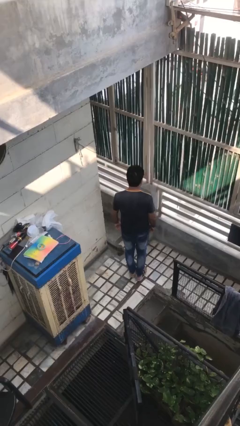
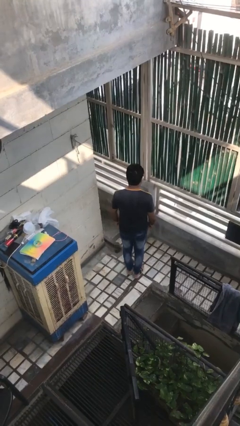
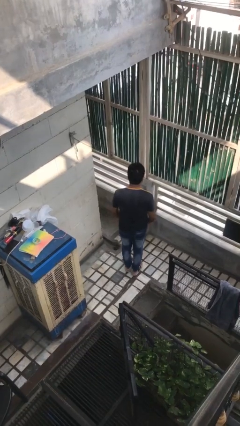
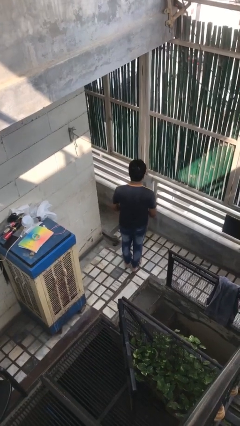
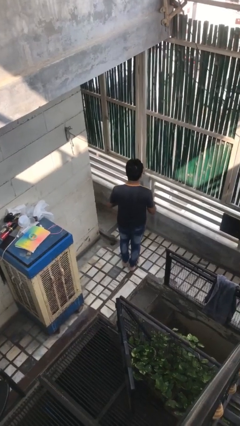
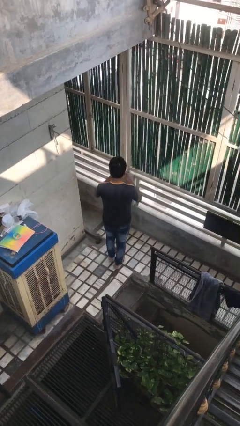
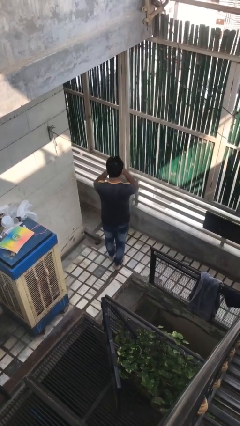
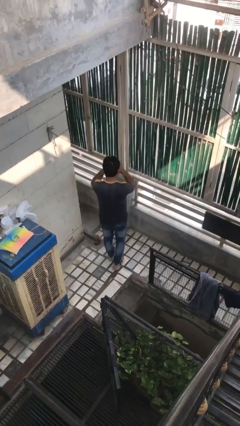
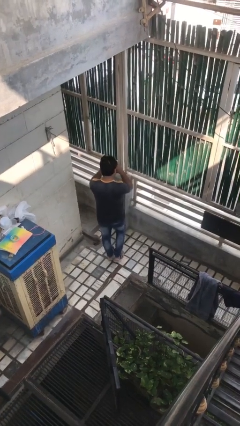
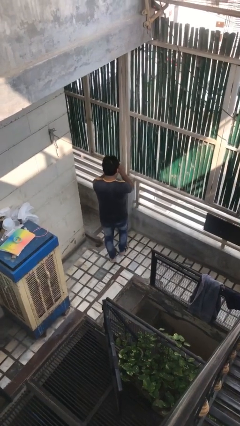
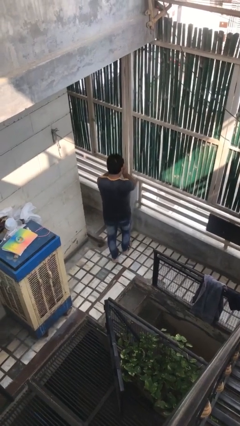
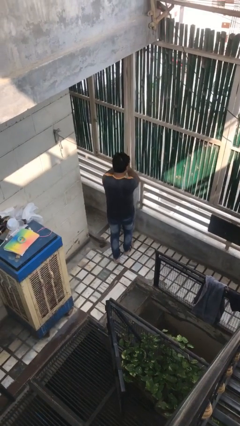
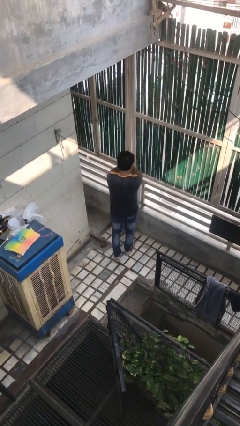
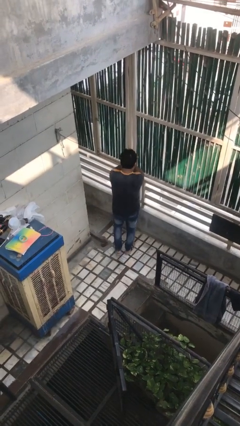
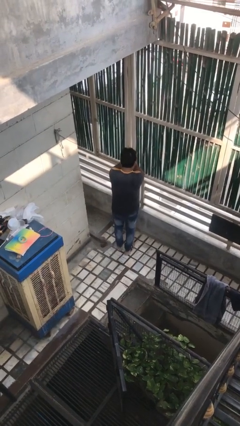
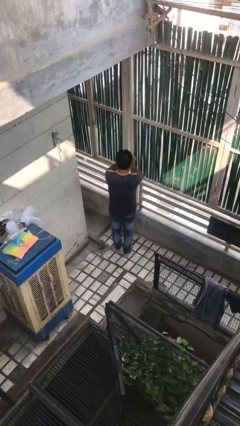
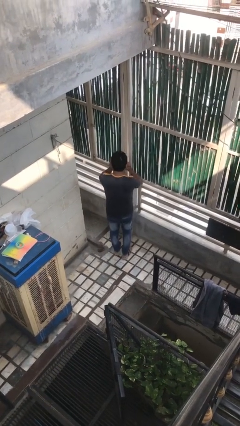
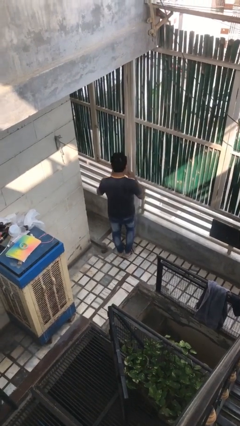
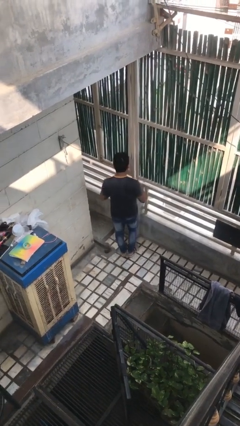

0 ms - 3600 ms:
person rubs eyes

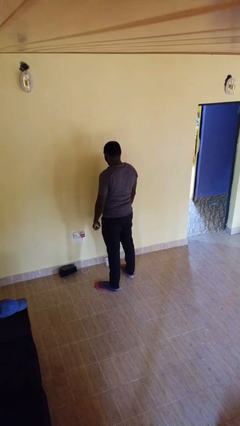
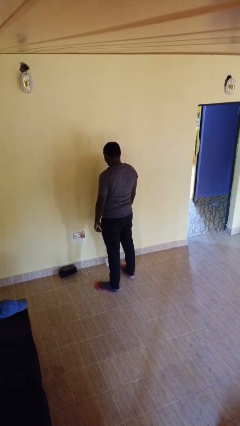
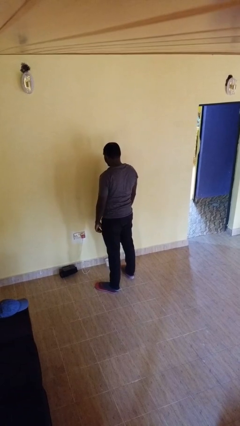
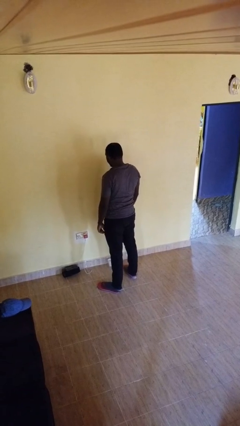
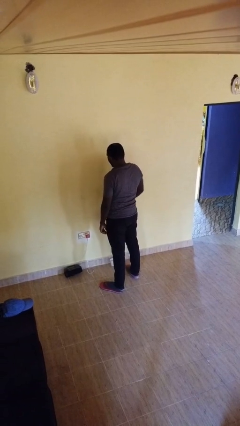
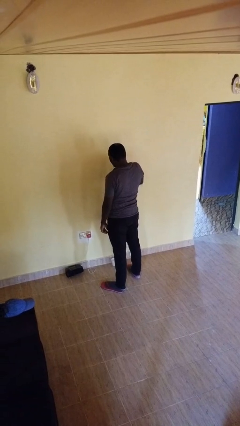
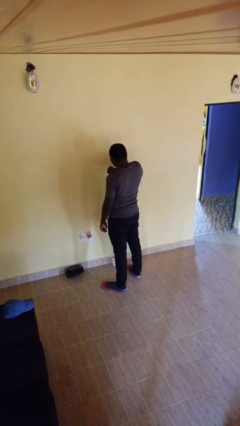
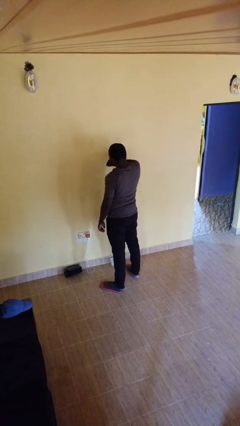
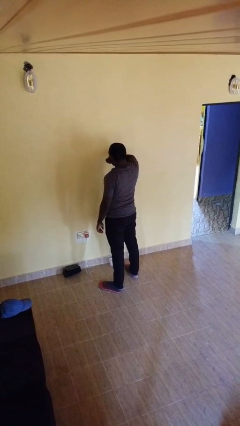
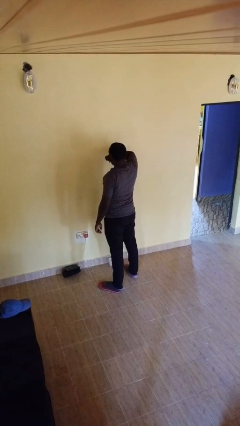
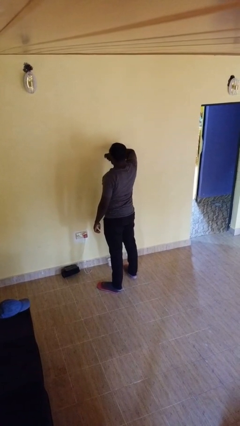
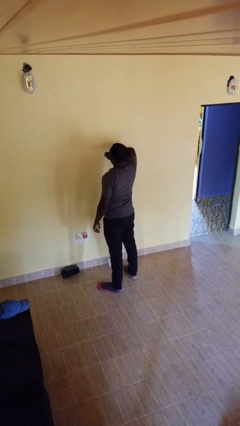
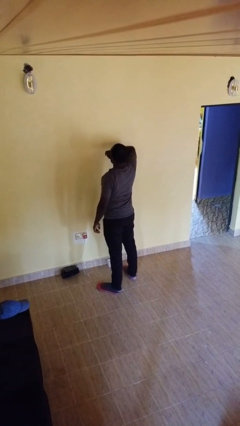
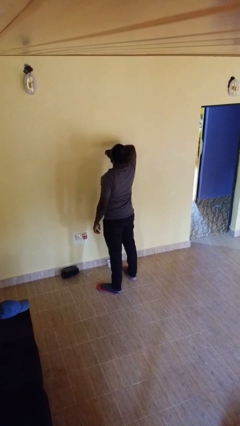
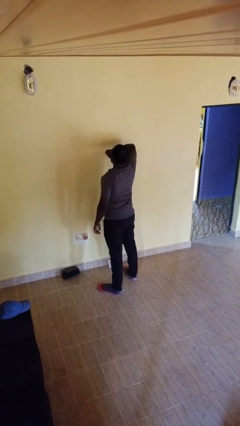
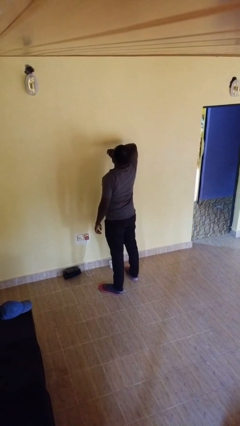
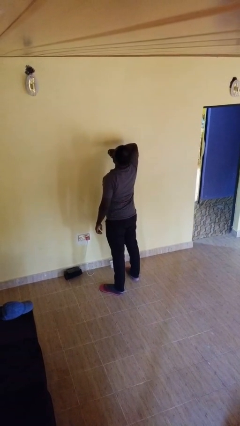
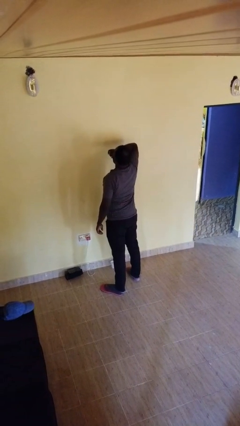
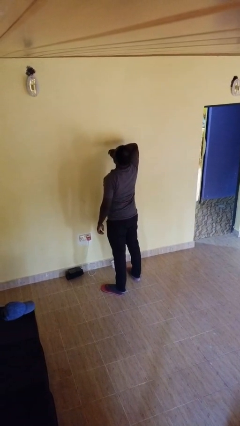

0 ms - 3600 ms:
person yawns

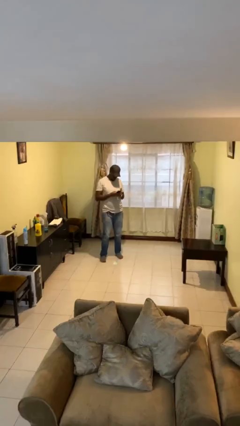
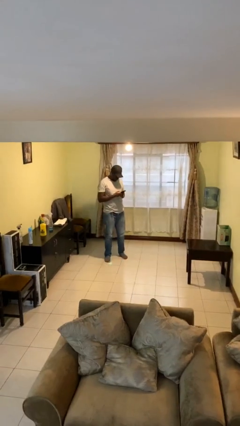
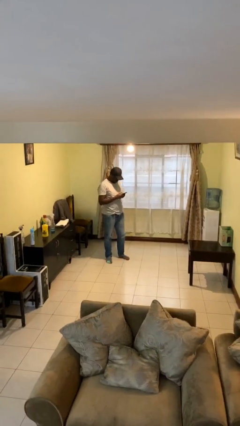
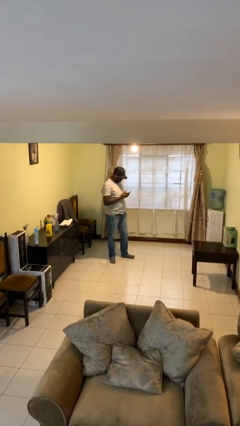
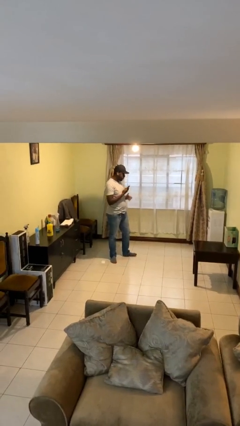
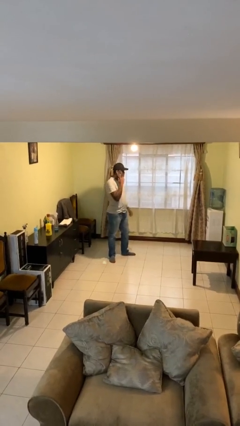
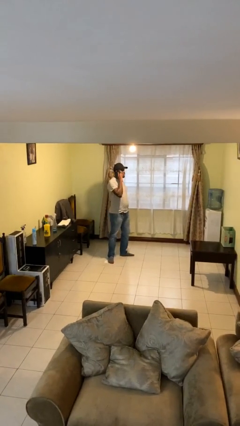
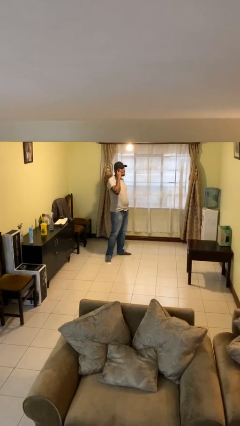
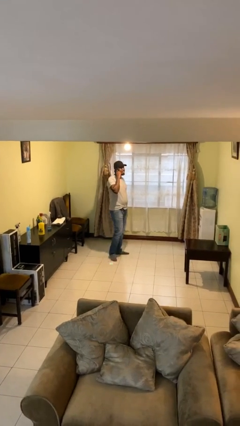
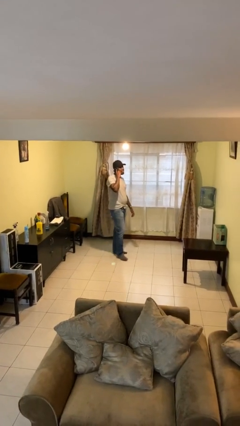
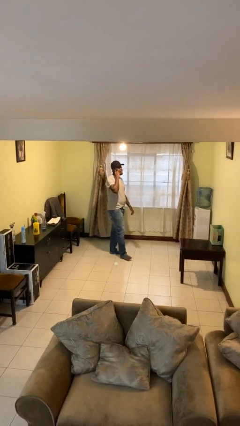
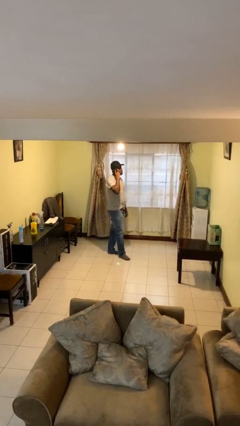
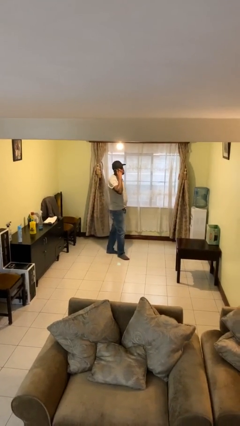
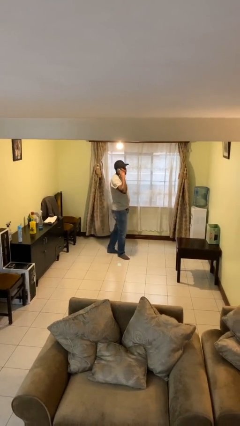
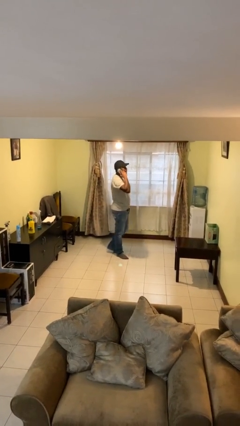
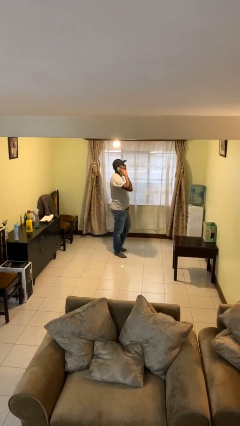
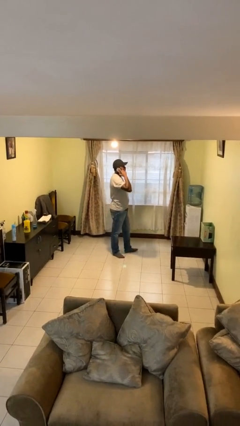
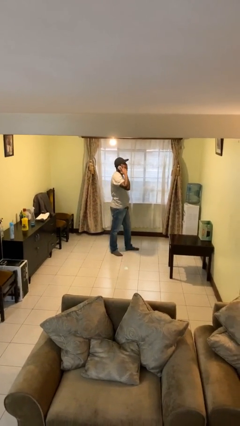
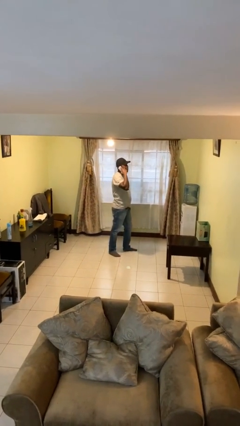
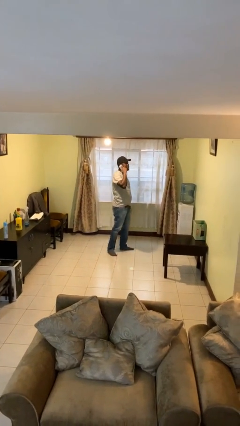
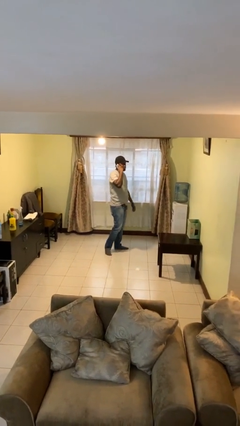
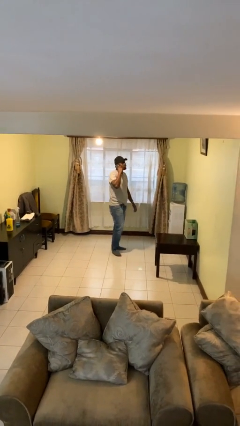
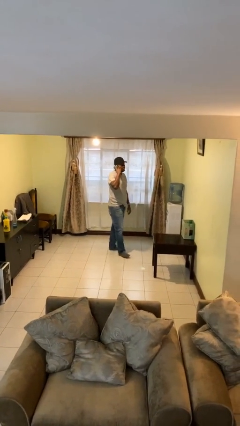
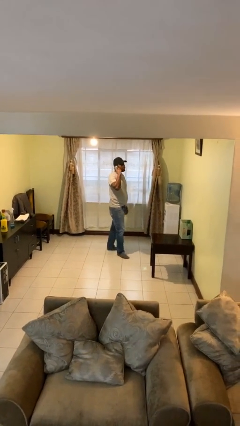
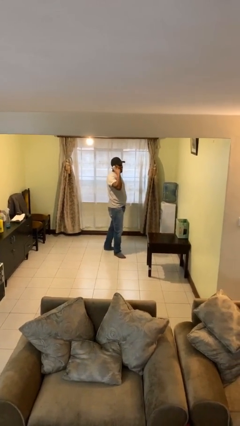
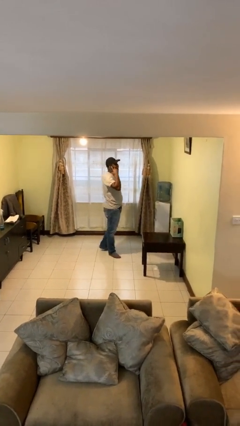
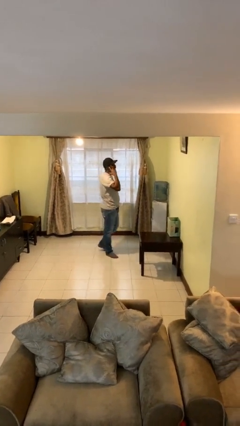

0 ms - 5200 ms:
person talks on phone

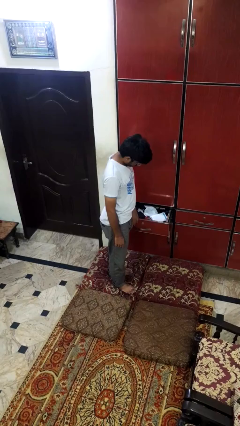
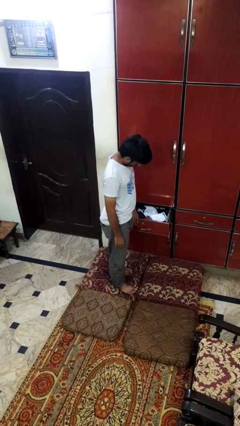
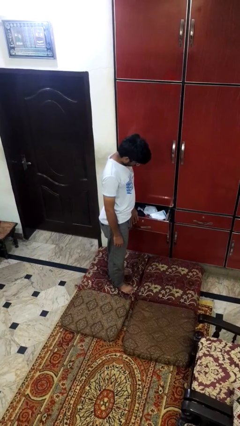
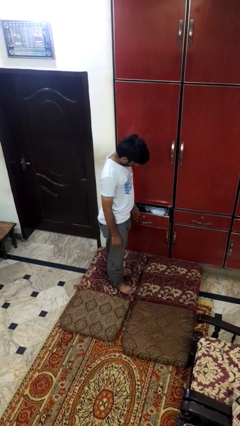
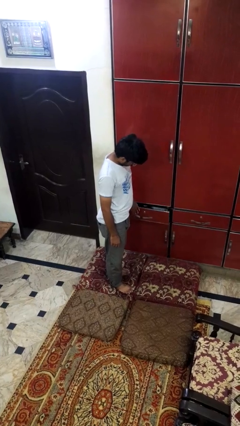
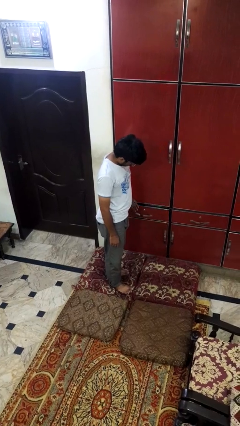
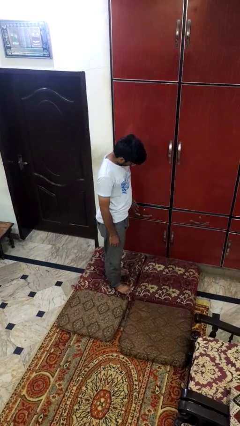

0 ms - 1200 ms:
person closes dresser drawer

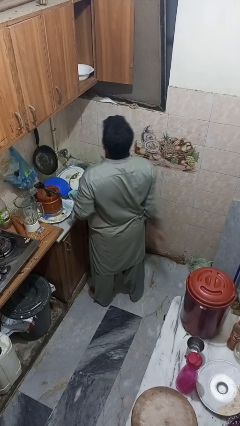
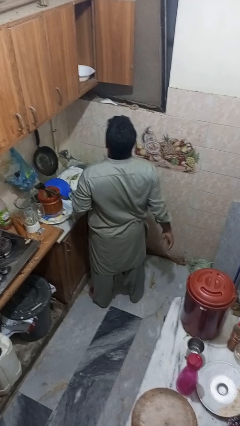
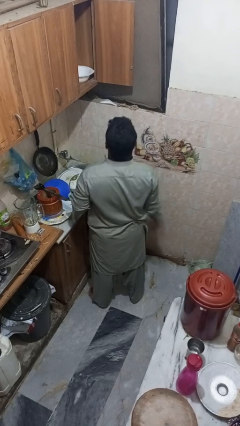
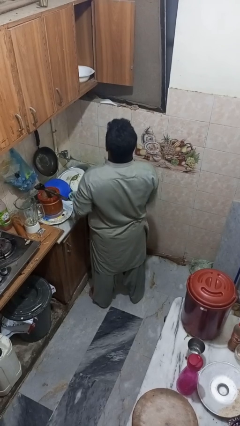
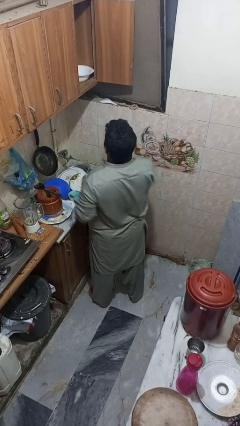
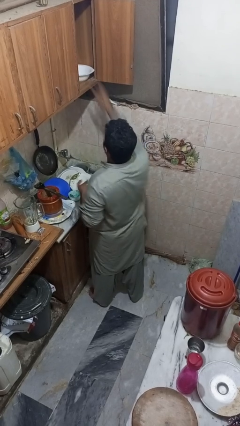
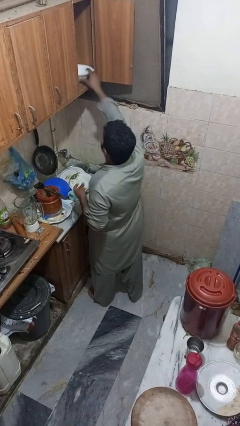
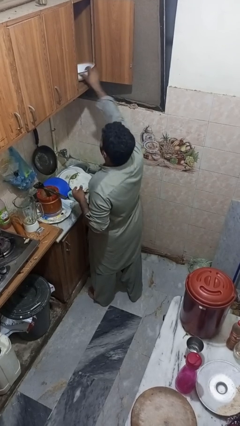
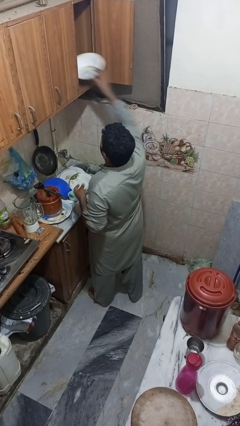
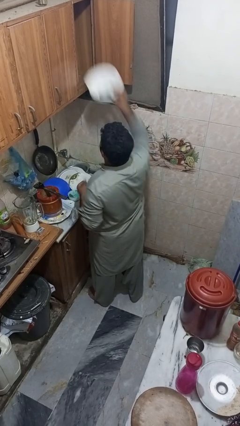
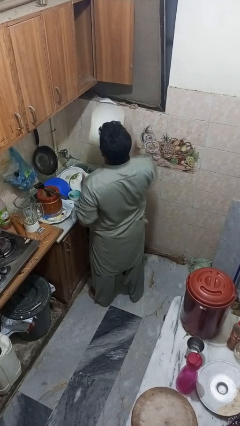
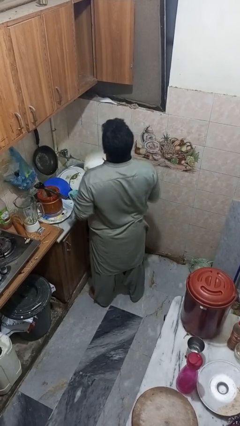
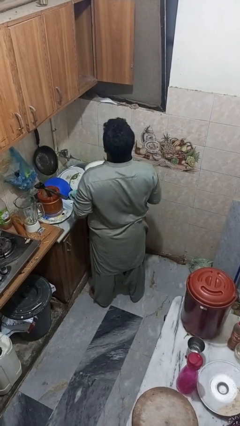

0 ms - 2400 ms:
person takes object from cabinet

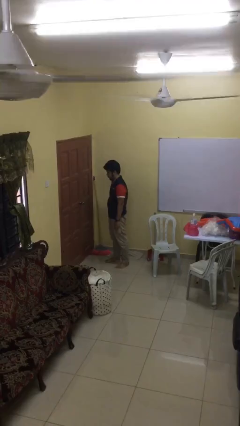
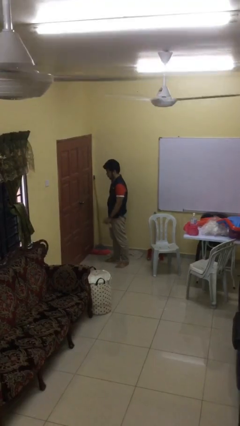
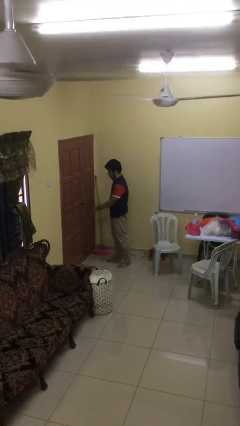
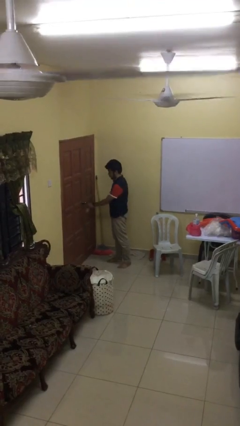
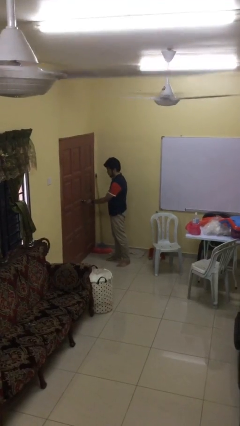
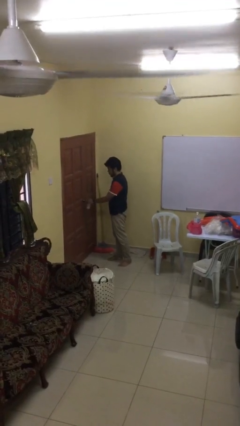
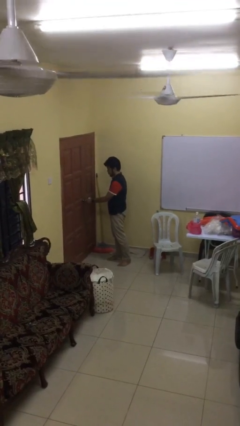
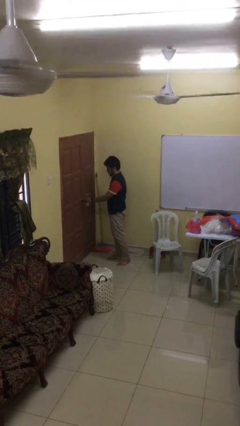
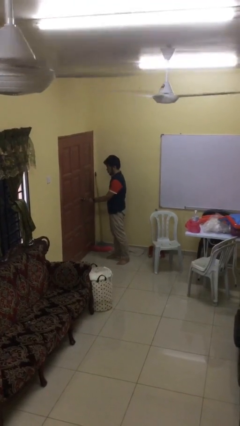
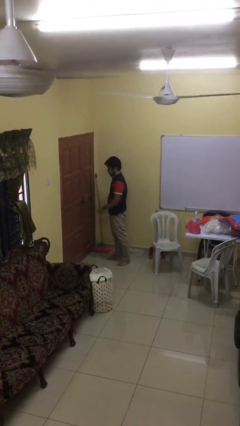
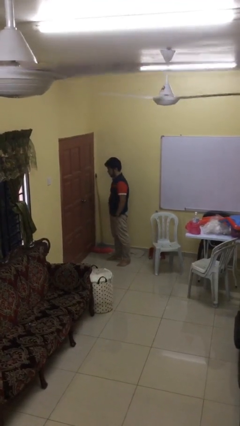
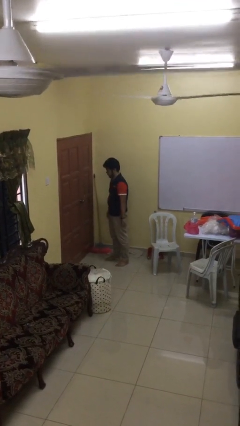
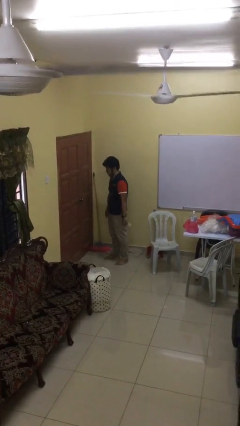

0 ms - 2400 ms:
person unlocks door with keys
